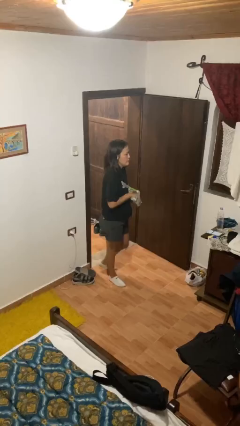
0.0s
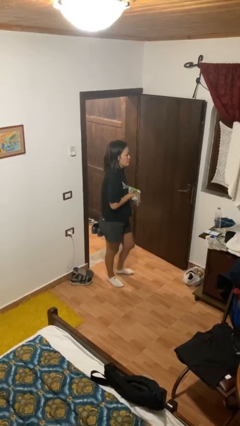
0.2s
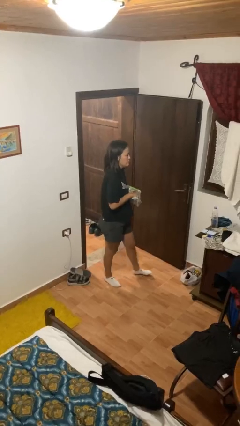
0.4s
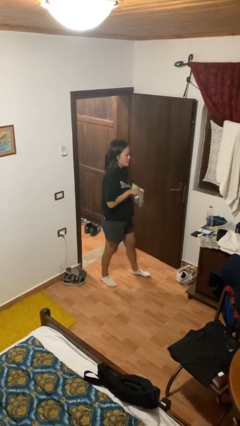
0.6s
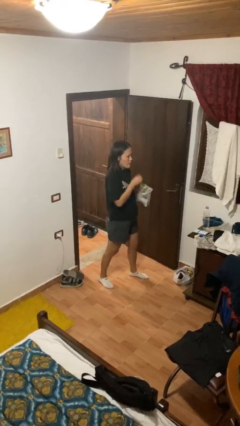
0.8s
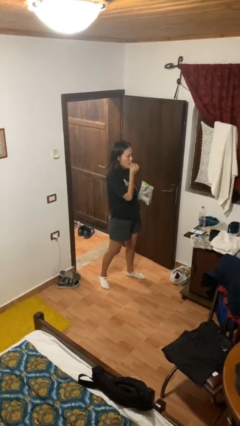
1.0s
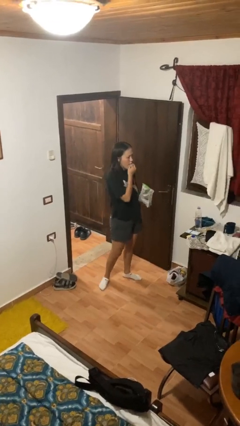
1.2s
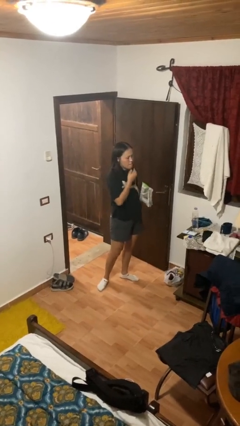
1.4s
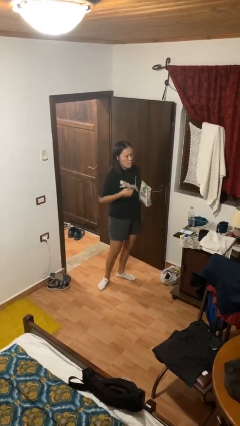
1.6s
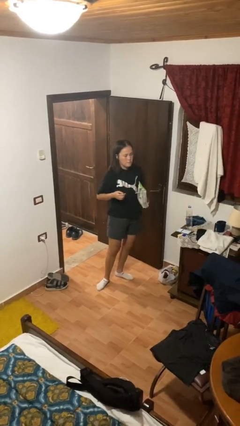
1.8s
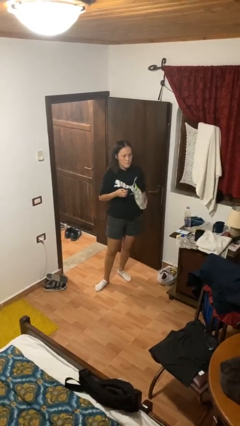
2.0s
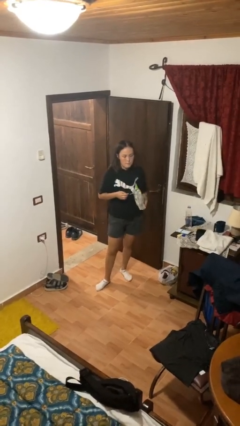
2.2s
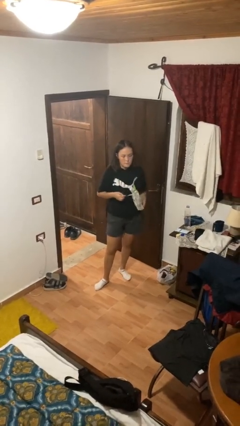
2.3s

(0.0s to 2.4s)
person eats snack from bag

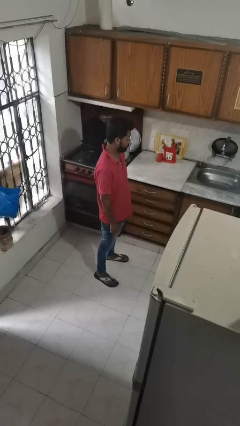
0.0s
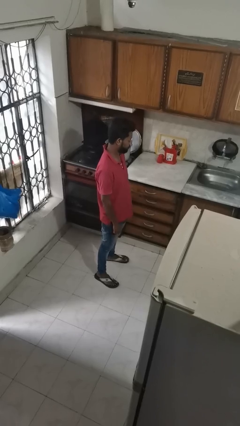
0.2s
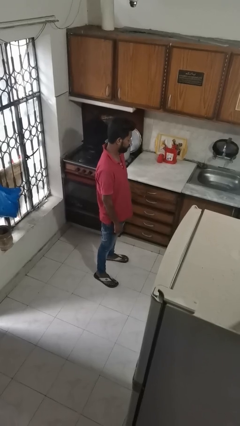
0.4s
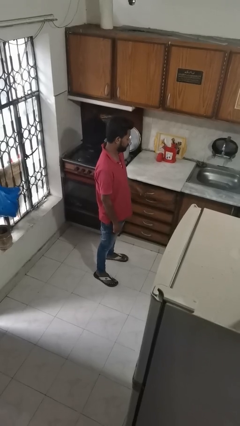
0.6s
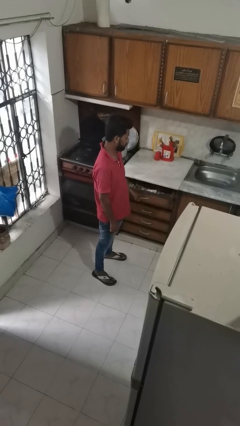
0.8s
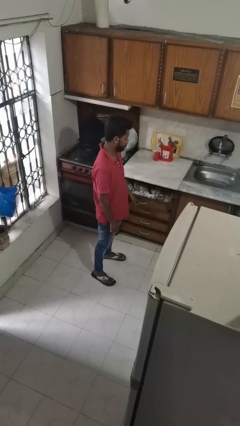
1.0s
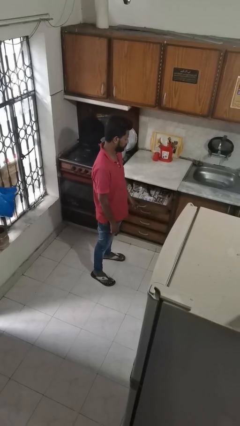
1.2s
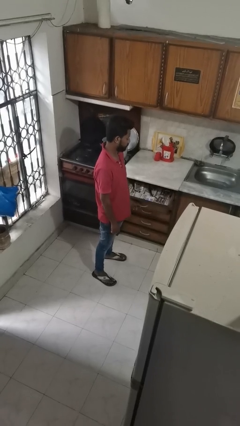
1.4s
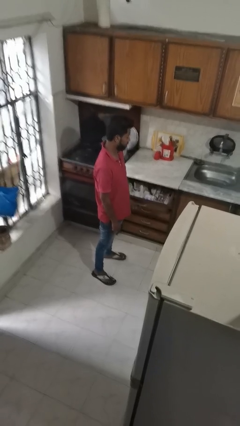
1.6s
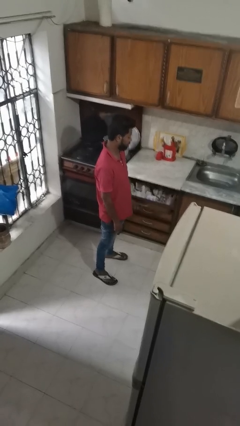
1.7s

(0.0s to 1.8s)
person opens kitchen drawer

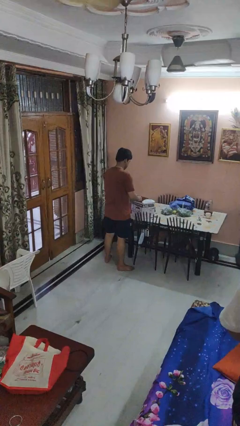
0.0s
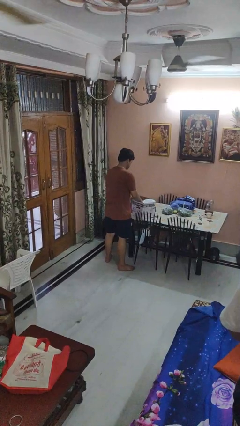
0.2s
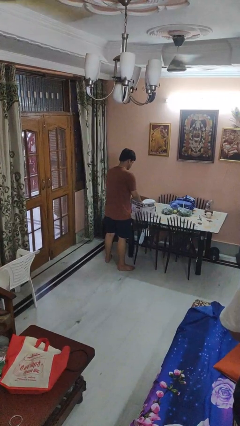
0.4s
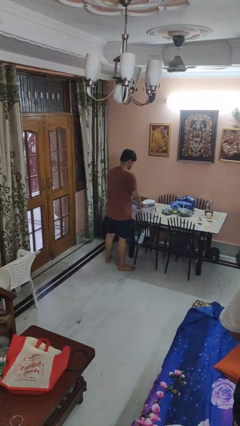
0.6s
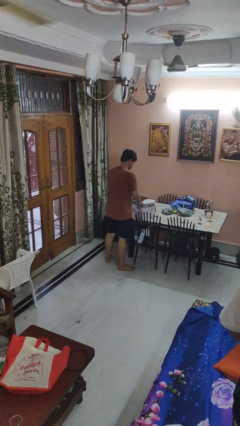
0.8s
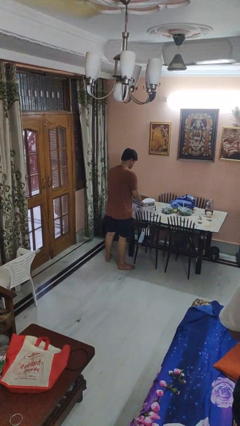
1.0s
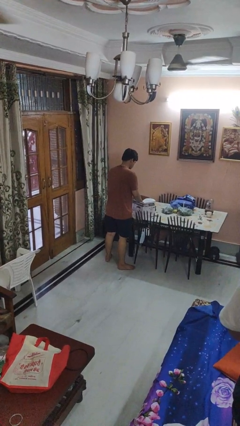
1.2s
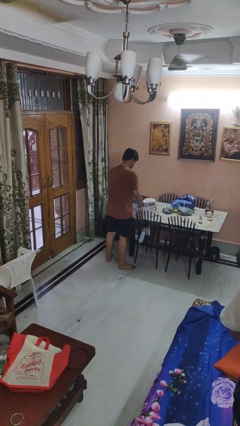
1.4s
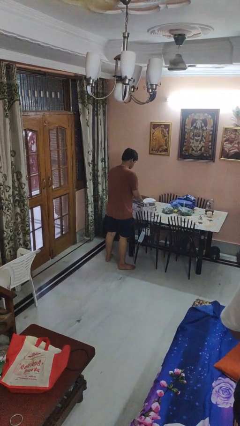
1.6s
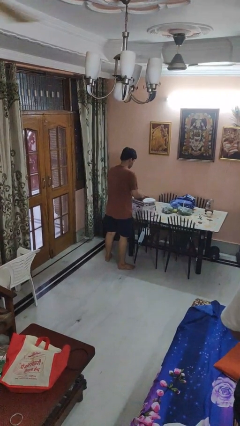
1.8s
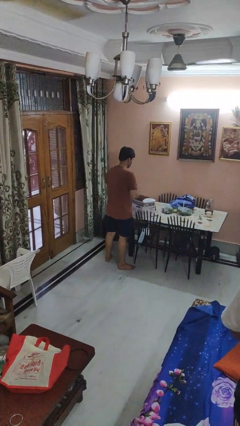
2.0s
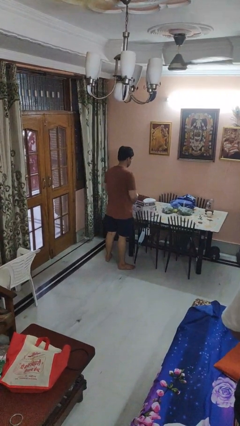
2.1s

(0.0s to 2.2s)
person searches in box

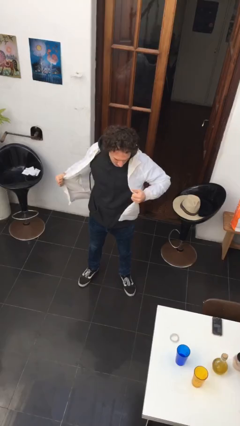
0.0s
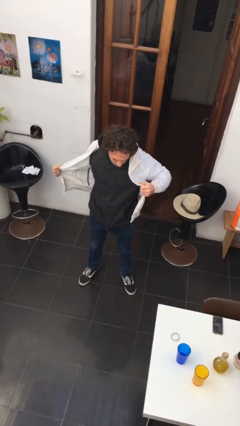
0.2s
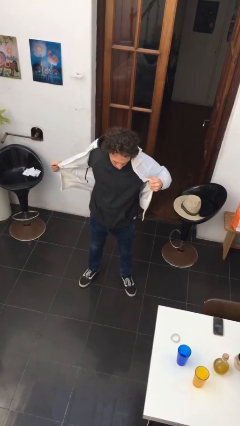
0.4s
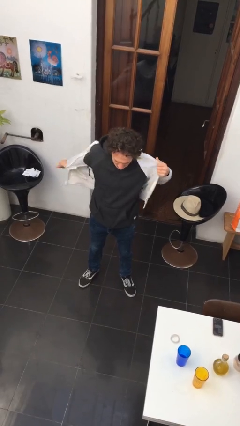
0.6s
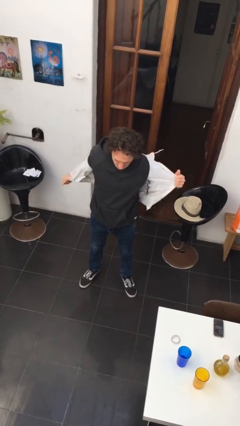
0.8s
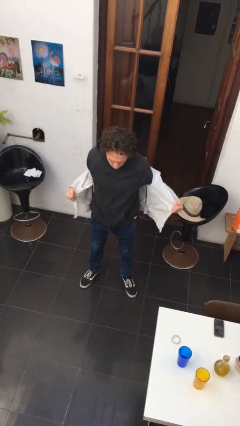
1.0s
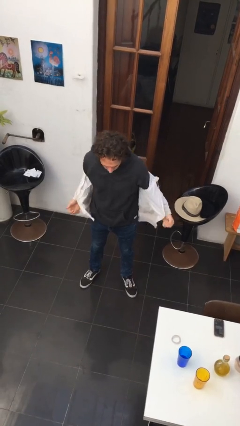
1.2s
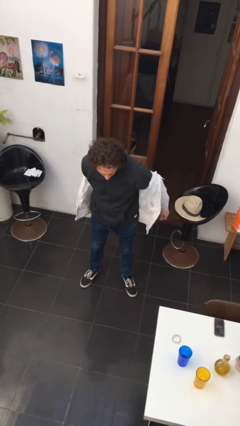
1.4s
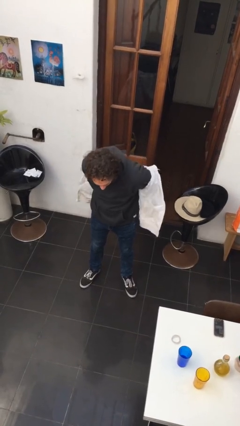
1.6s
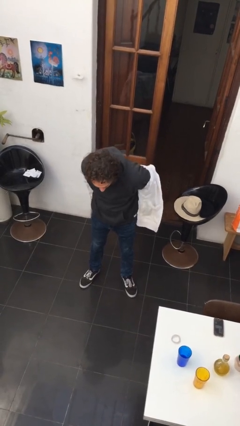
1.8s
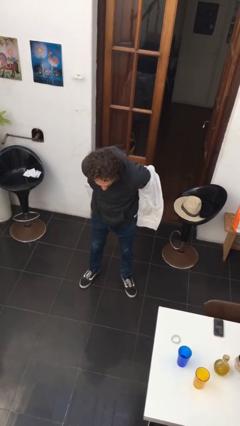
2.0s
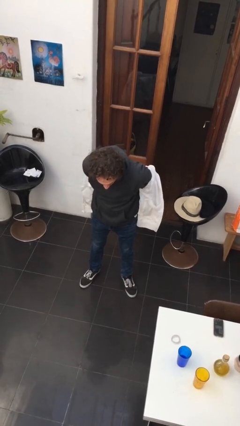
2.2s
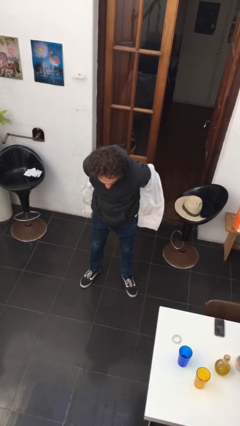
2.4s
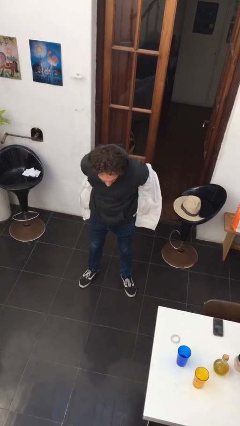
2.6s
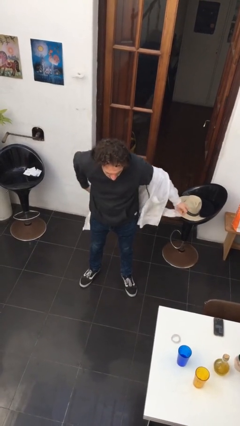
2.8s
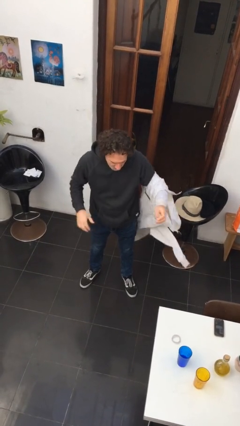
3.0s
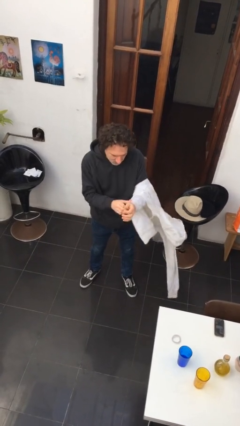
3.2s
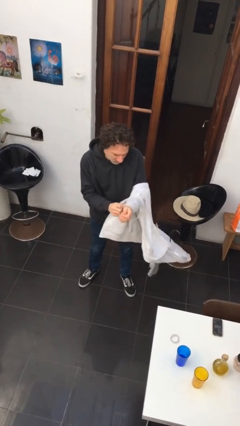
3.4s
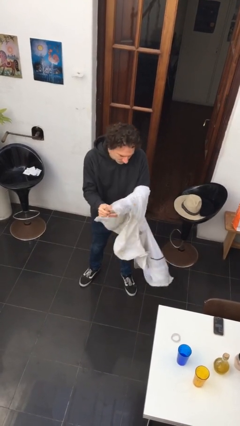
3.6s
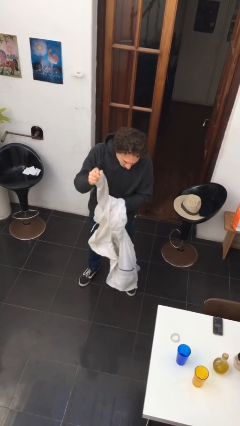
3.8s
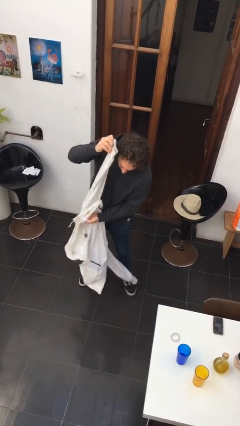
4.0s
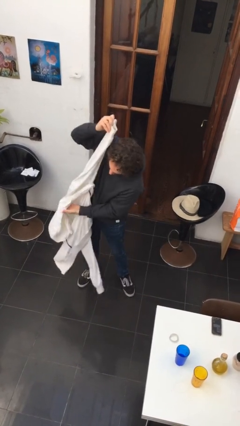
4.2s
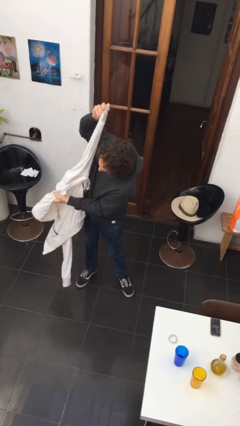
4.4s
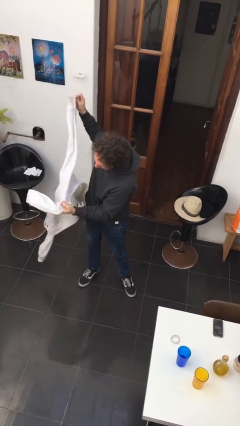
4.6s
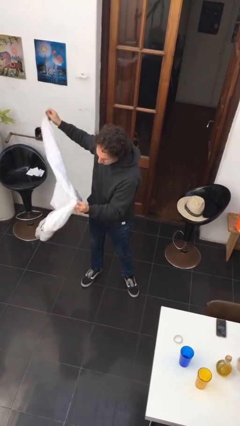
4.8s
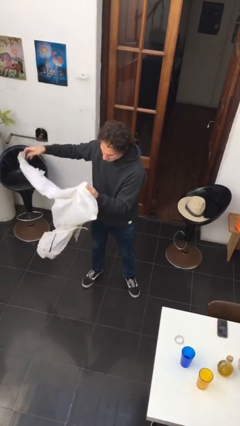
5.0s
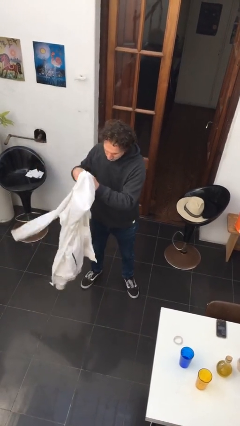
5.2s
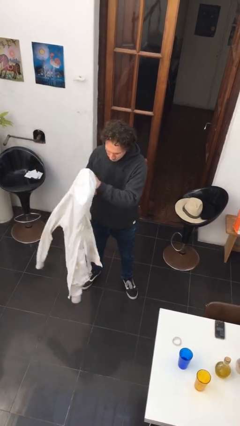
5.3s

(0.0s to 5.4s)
person takes off jacket

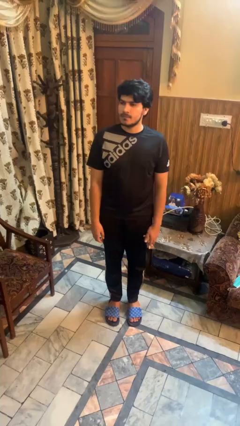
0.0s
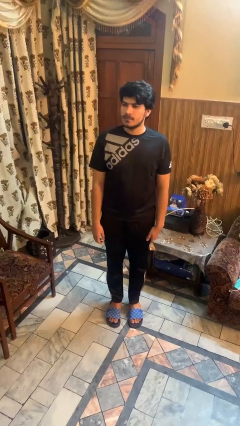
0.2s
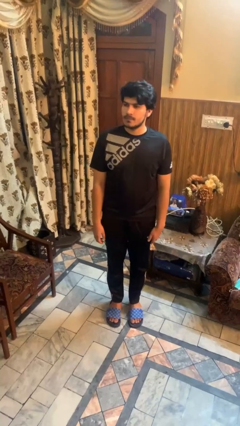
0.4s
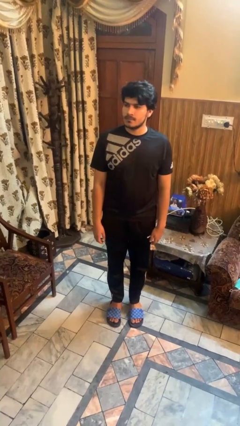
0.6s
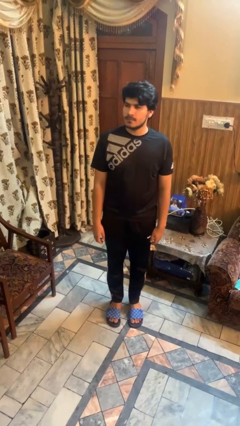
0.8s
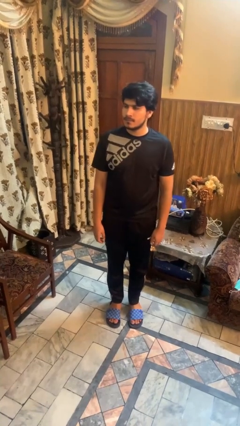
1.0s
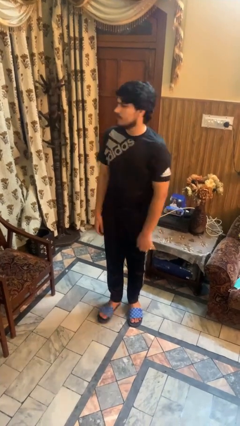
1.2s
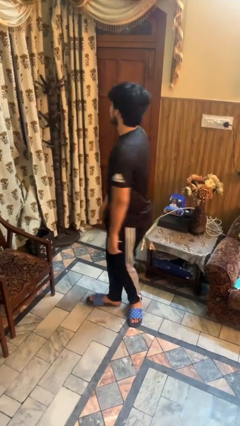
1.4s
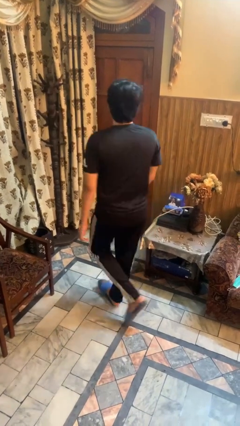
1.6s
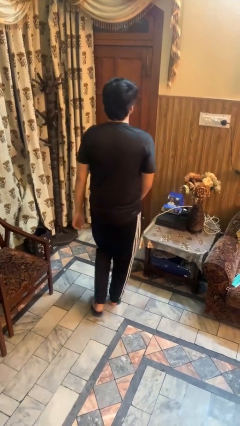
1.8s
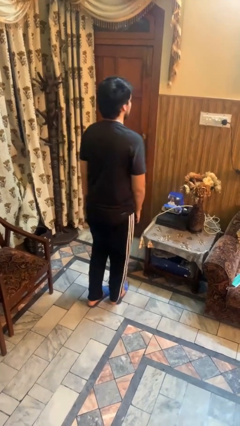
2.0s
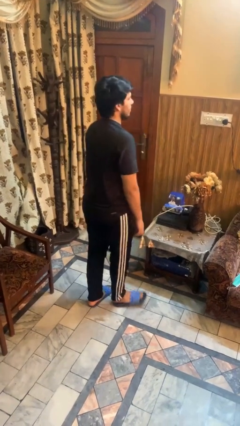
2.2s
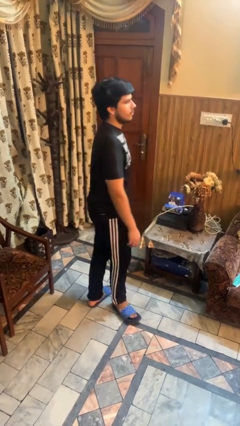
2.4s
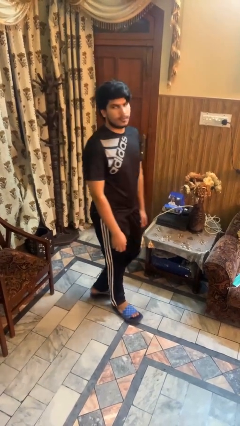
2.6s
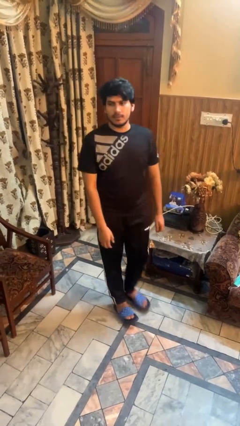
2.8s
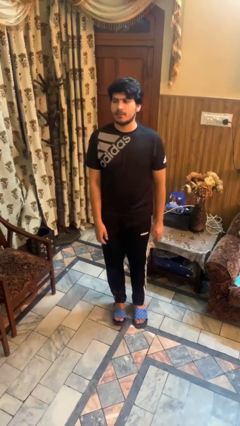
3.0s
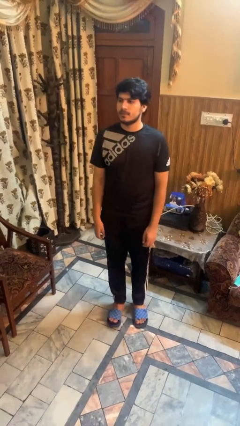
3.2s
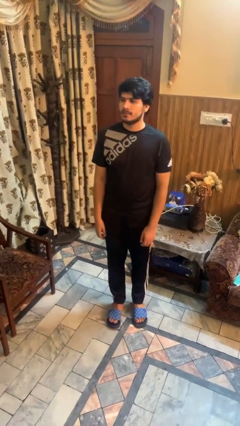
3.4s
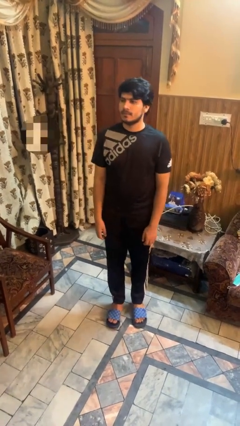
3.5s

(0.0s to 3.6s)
person twirls

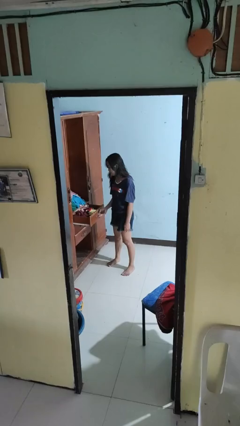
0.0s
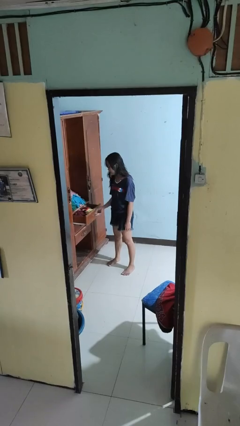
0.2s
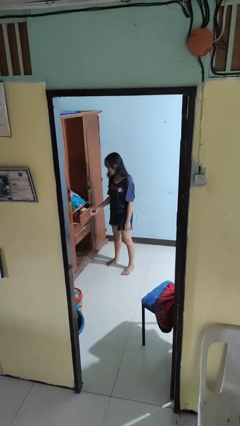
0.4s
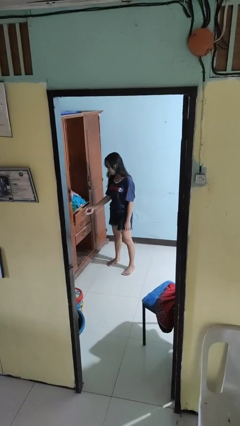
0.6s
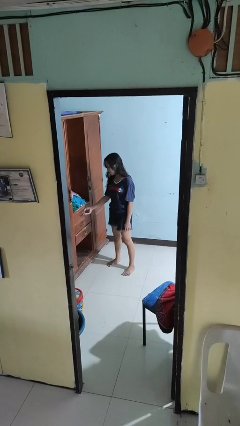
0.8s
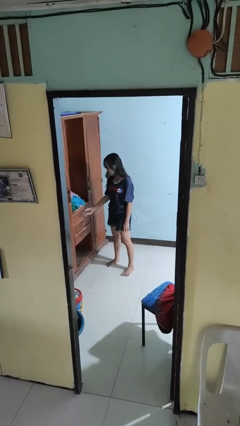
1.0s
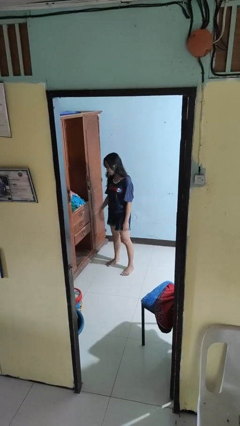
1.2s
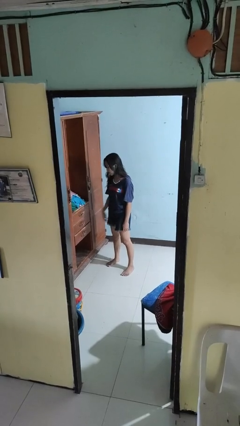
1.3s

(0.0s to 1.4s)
person closes dresser drawer

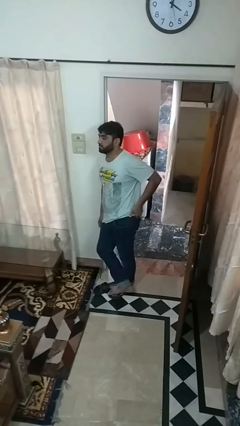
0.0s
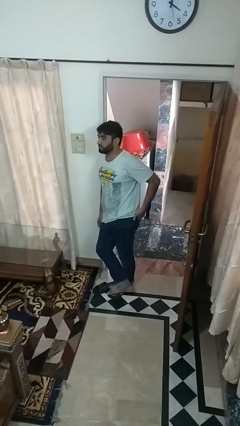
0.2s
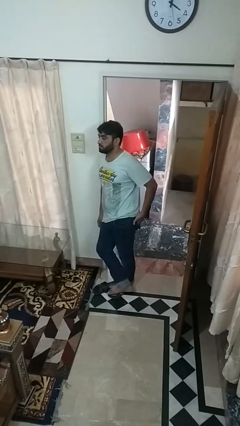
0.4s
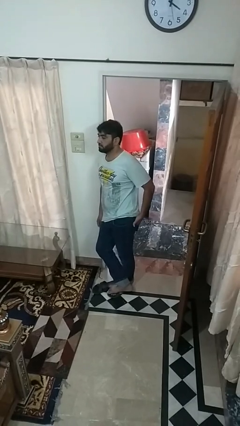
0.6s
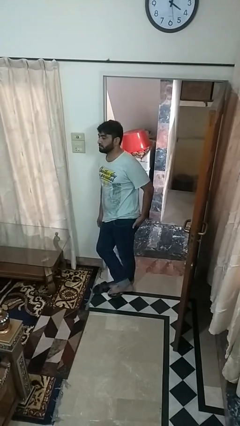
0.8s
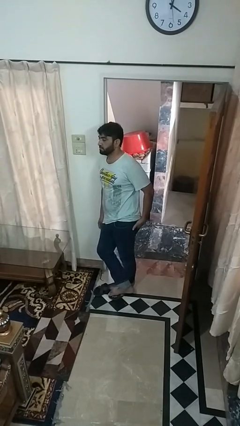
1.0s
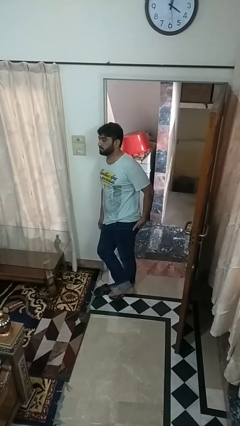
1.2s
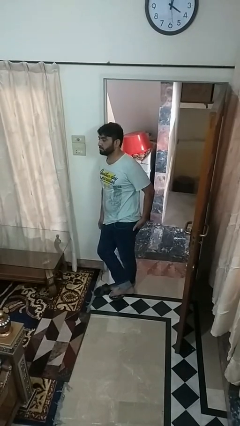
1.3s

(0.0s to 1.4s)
person puts hands in back pockets
